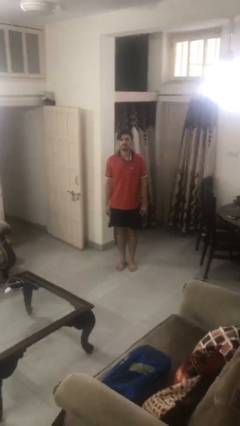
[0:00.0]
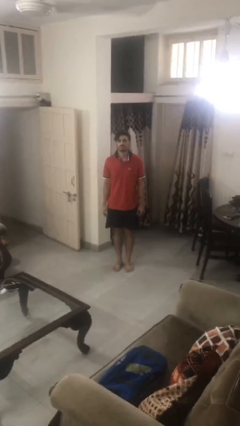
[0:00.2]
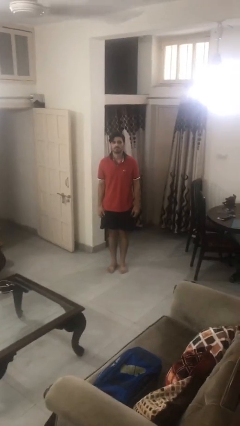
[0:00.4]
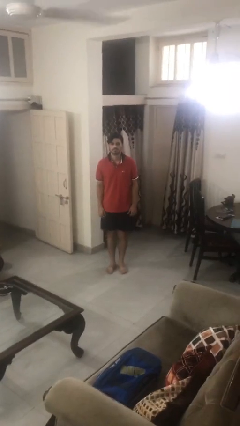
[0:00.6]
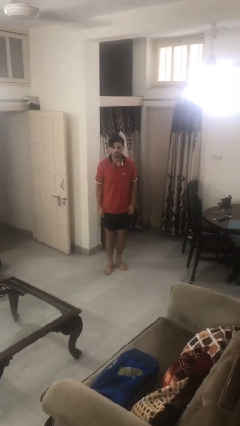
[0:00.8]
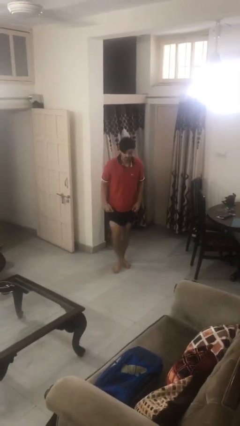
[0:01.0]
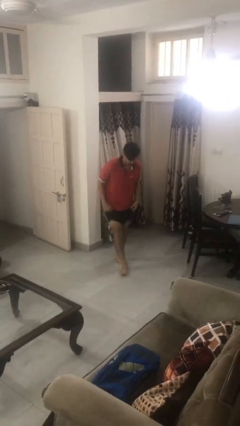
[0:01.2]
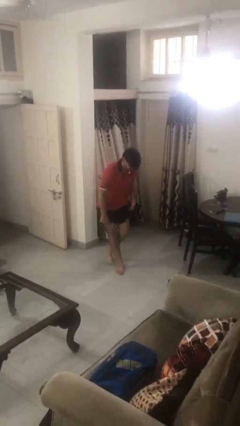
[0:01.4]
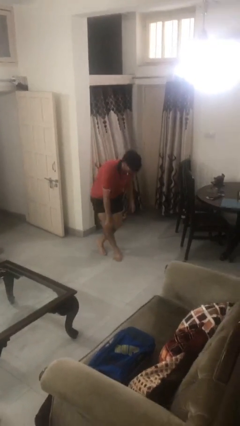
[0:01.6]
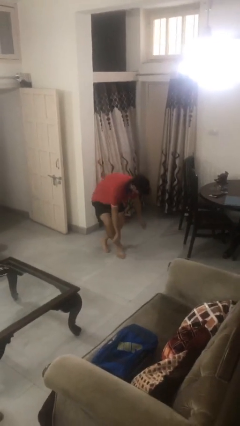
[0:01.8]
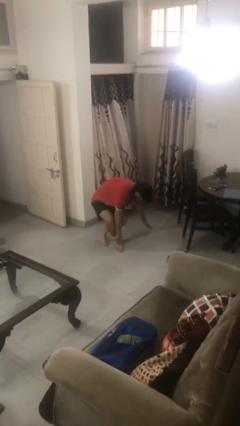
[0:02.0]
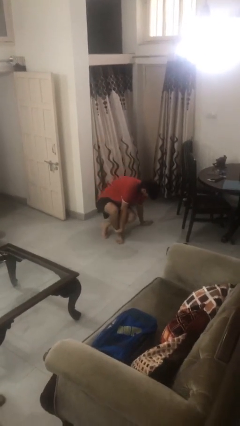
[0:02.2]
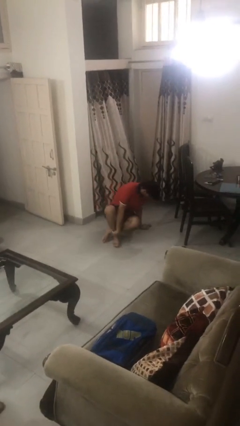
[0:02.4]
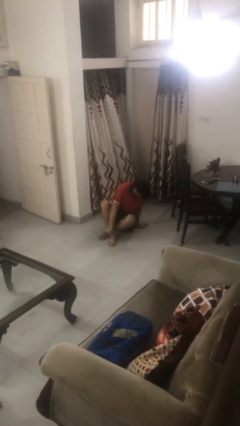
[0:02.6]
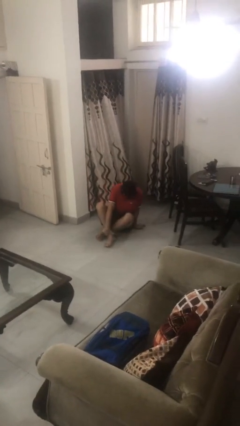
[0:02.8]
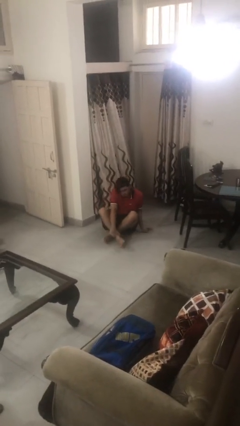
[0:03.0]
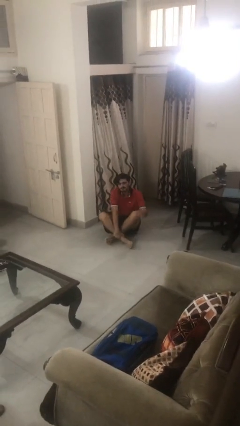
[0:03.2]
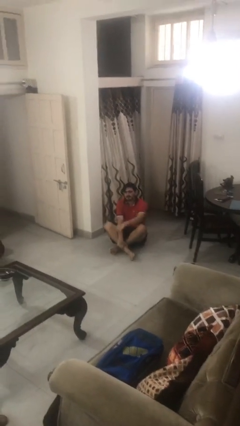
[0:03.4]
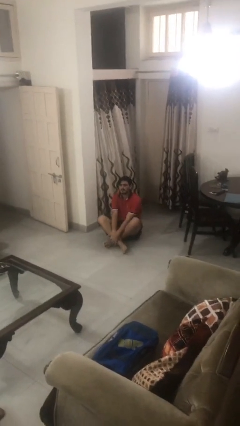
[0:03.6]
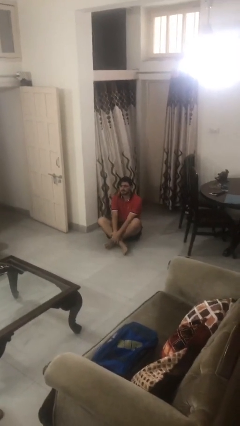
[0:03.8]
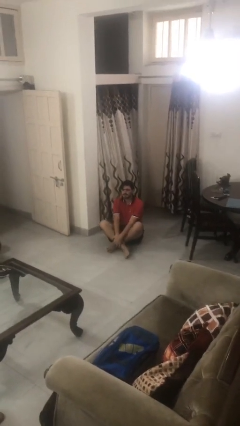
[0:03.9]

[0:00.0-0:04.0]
person sits crisscross

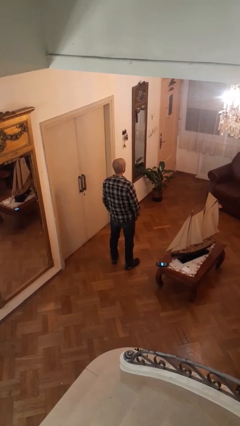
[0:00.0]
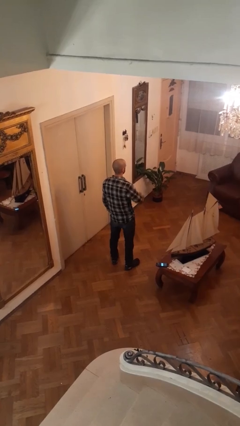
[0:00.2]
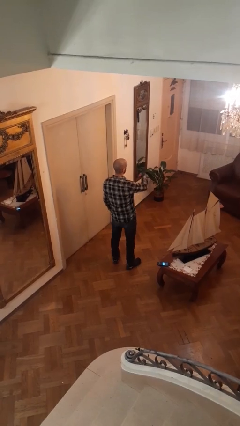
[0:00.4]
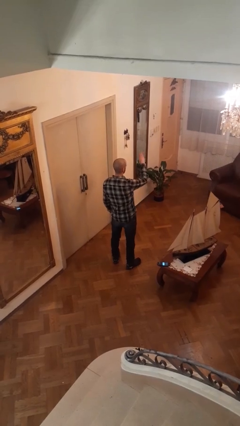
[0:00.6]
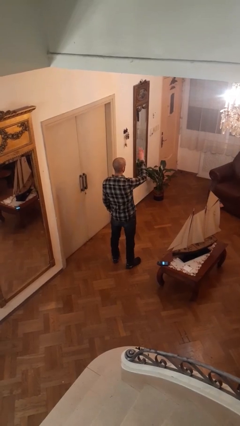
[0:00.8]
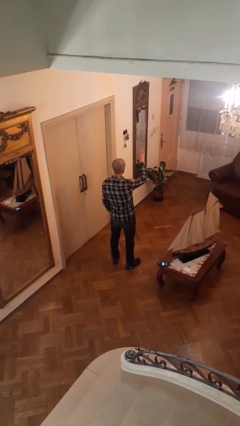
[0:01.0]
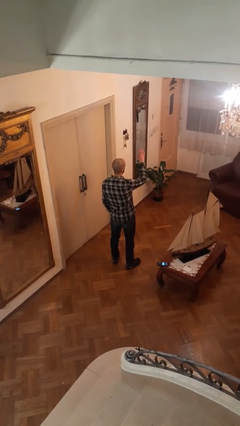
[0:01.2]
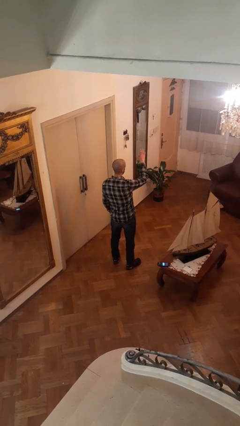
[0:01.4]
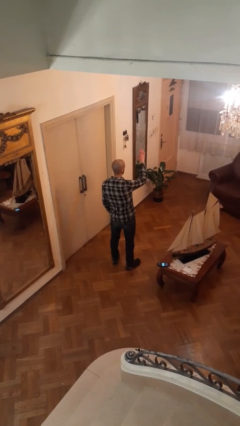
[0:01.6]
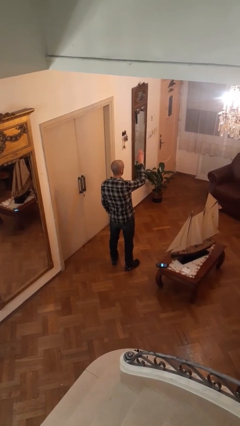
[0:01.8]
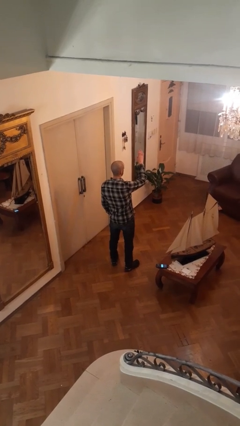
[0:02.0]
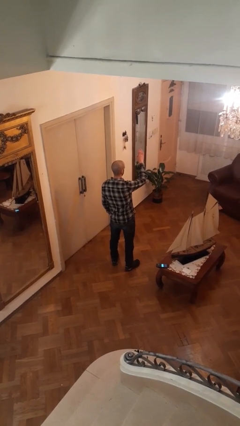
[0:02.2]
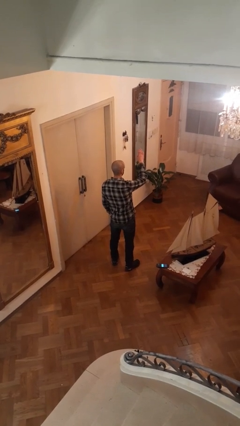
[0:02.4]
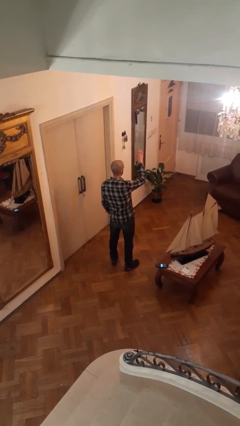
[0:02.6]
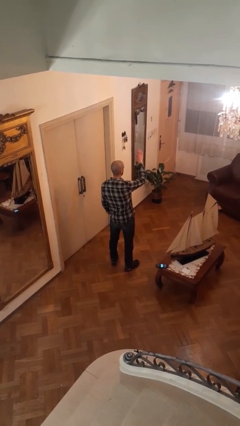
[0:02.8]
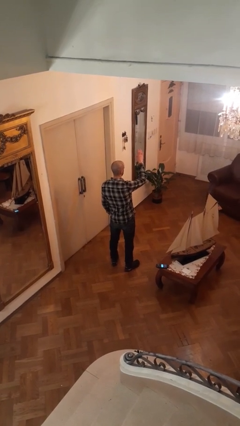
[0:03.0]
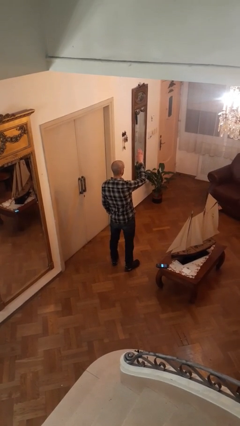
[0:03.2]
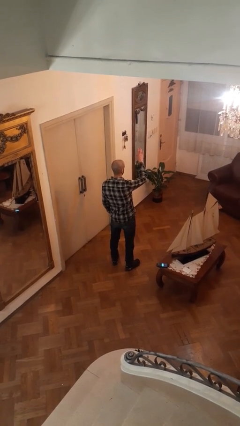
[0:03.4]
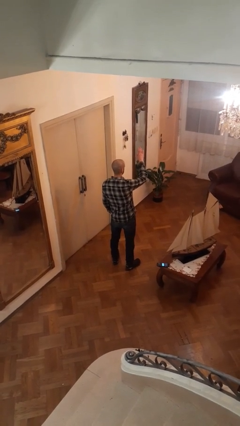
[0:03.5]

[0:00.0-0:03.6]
person gestures swipe up

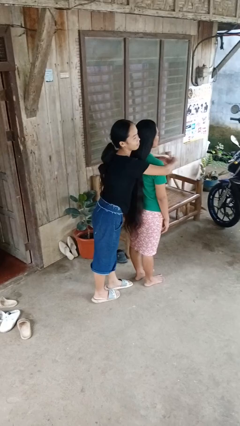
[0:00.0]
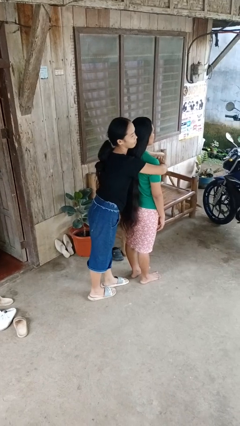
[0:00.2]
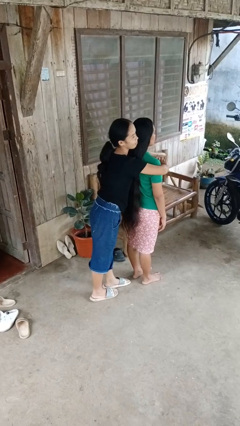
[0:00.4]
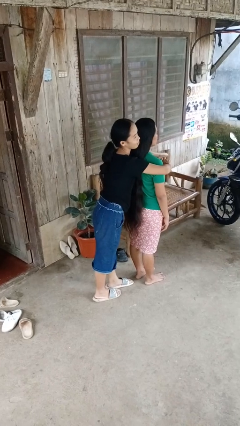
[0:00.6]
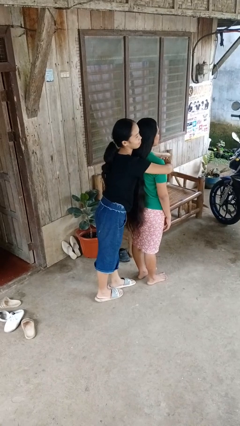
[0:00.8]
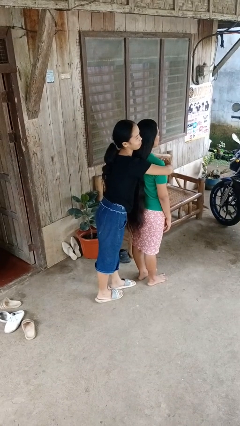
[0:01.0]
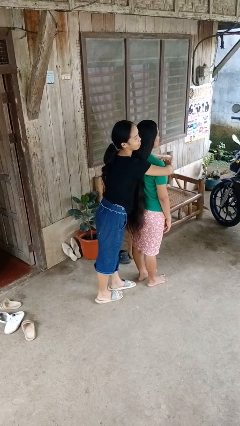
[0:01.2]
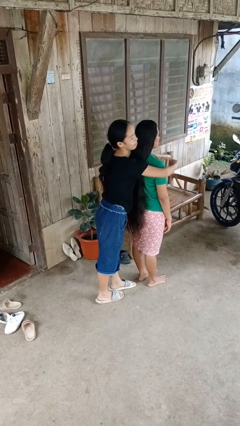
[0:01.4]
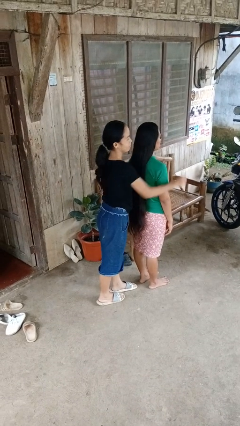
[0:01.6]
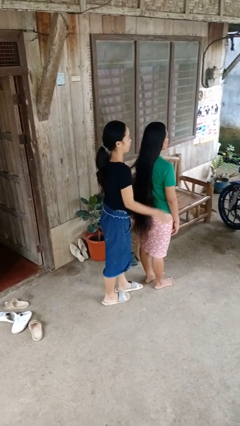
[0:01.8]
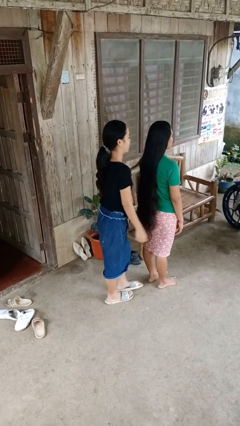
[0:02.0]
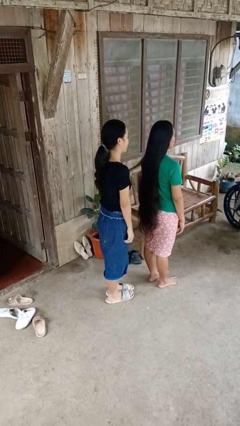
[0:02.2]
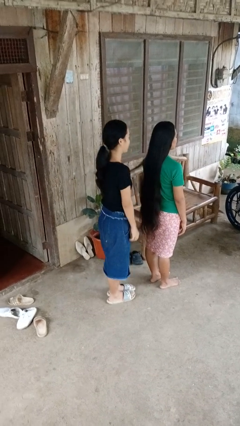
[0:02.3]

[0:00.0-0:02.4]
person hugs person from behind

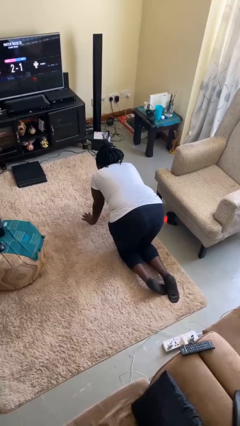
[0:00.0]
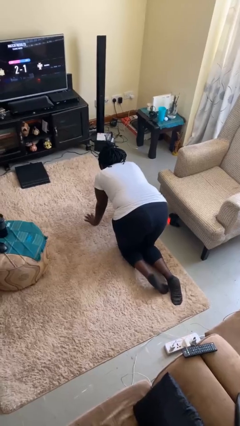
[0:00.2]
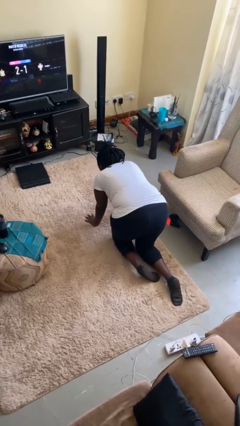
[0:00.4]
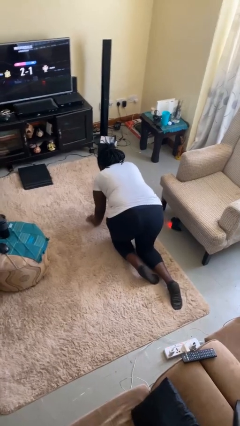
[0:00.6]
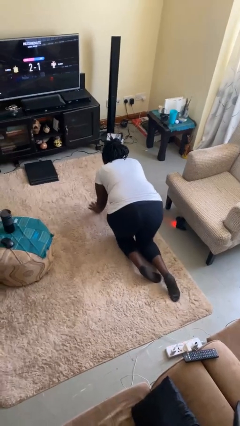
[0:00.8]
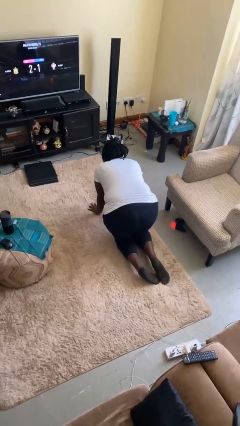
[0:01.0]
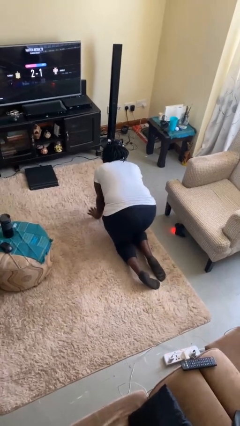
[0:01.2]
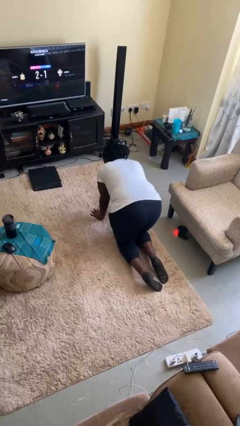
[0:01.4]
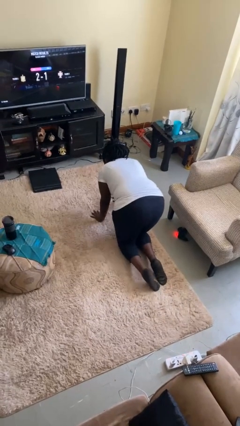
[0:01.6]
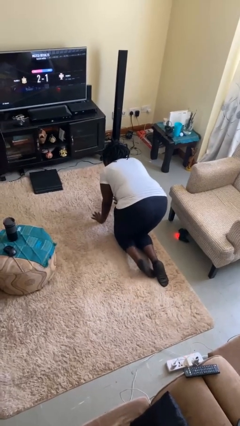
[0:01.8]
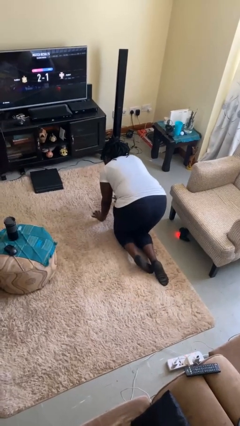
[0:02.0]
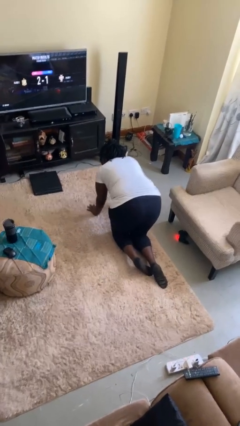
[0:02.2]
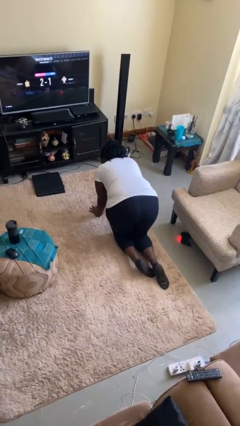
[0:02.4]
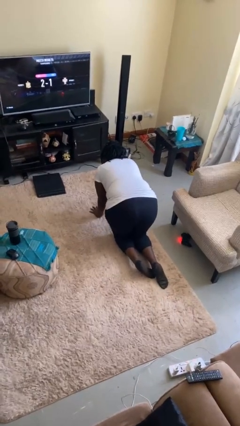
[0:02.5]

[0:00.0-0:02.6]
person crawls

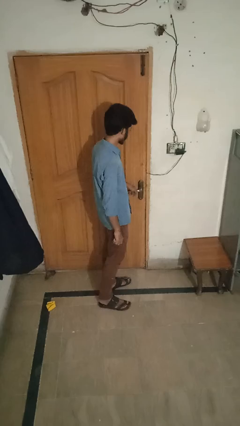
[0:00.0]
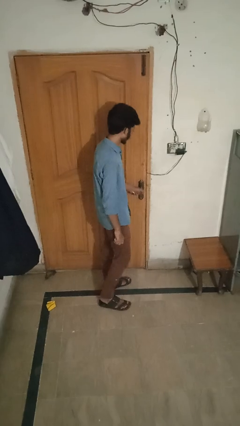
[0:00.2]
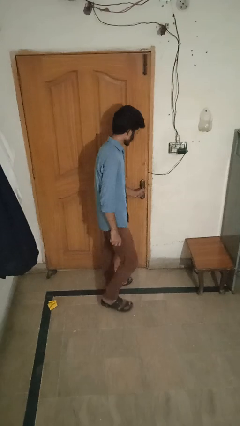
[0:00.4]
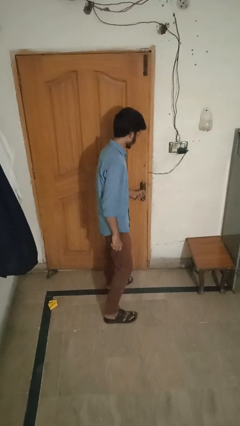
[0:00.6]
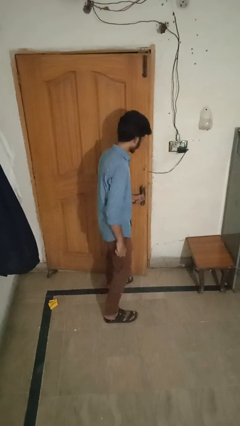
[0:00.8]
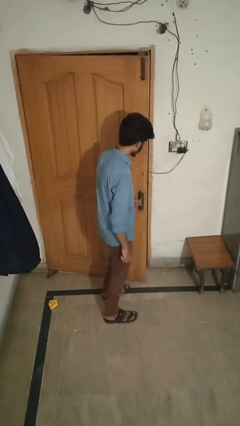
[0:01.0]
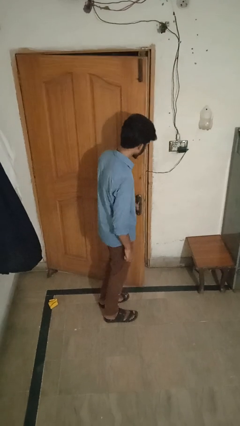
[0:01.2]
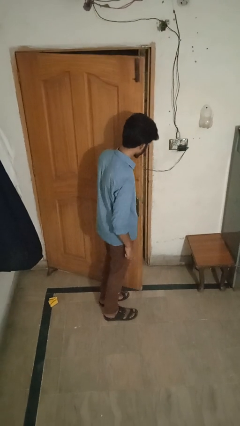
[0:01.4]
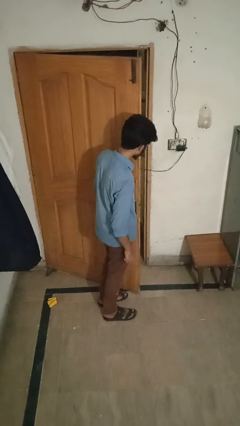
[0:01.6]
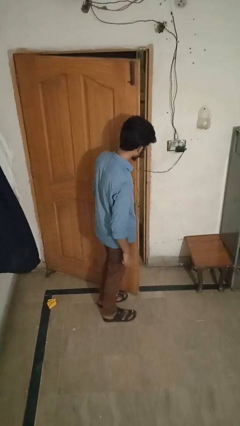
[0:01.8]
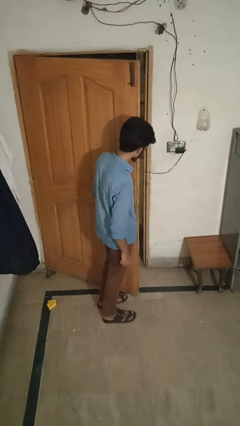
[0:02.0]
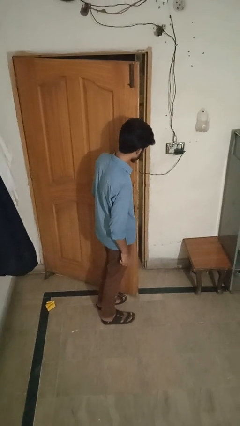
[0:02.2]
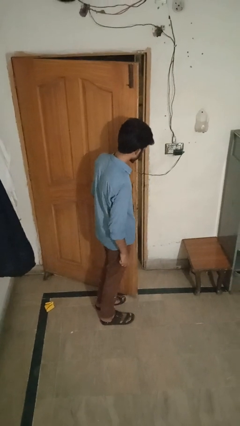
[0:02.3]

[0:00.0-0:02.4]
person opens facility door

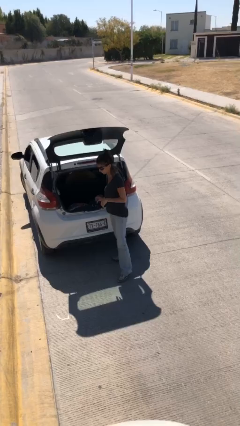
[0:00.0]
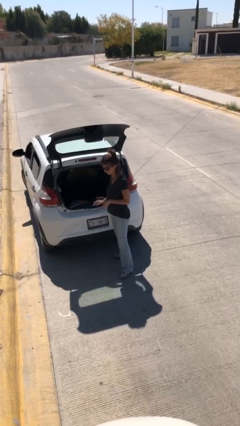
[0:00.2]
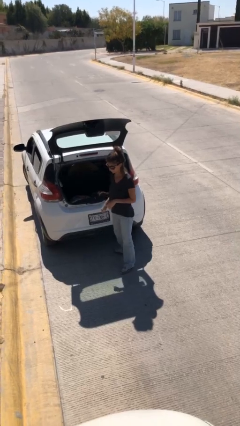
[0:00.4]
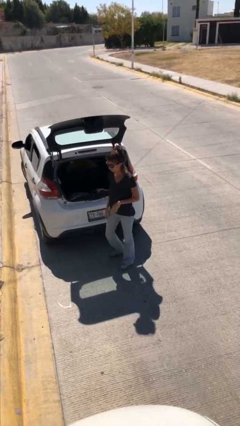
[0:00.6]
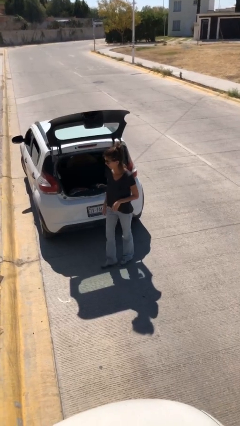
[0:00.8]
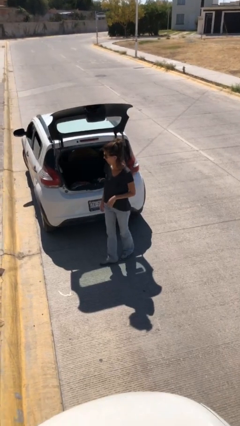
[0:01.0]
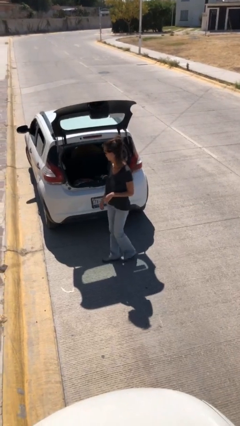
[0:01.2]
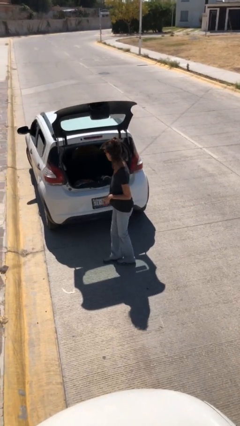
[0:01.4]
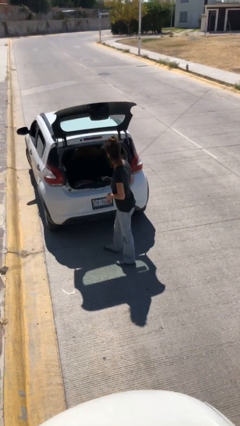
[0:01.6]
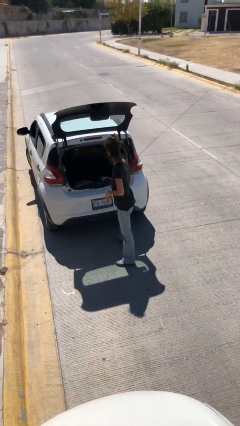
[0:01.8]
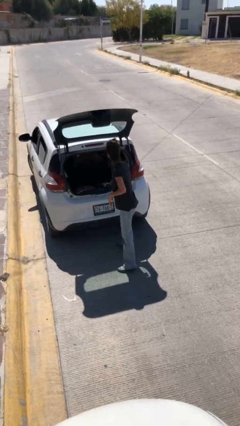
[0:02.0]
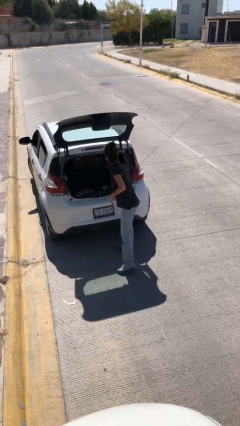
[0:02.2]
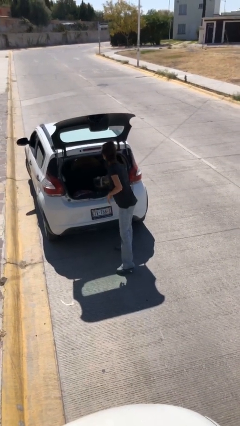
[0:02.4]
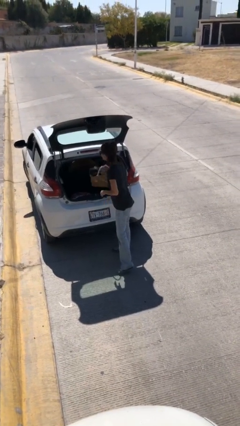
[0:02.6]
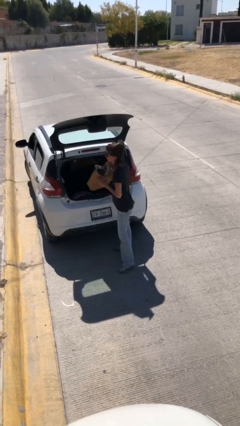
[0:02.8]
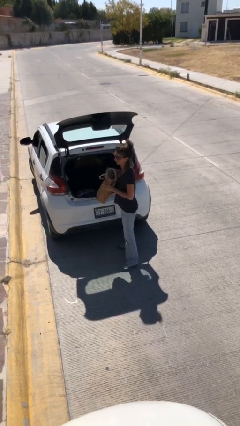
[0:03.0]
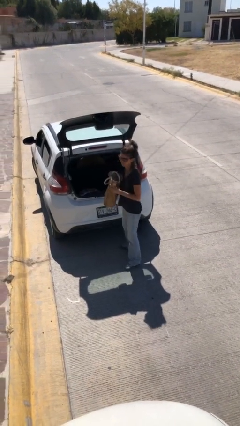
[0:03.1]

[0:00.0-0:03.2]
person unloads car
